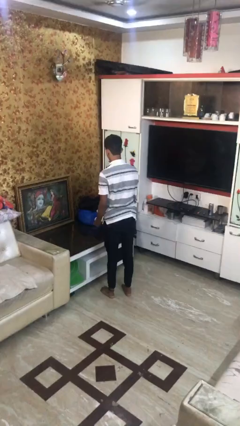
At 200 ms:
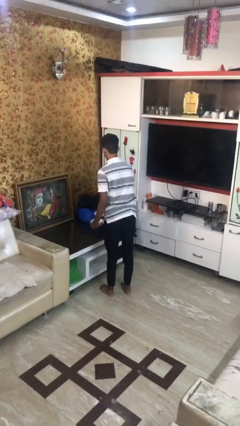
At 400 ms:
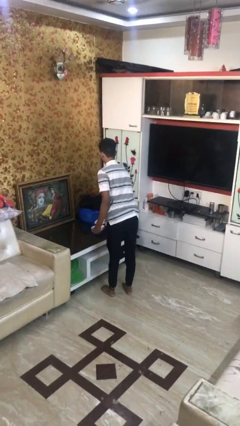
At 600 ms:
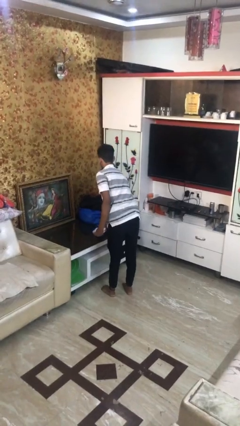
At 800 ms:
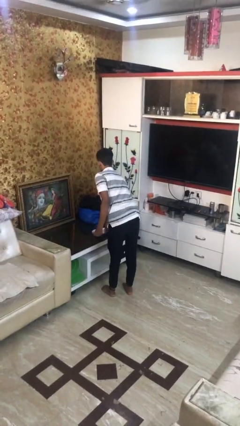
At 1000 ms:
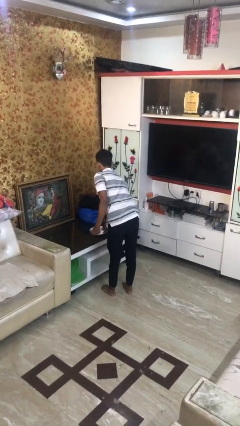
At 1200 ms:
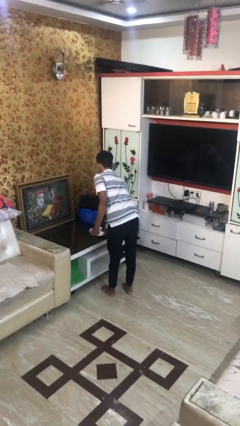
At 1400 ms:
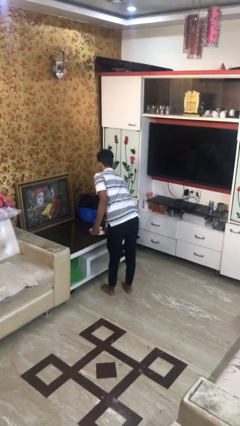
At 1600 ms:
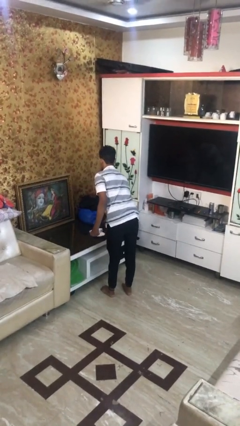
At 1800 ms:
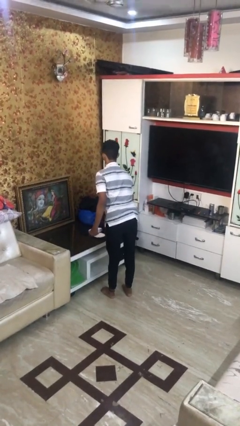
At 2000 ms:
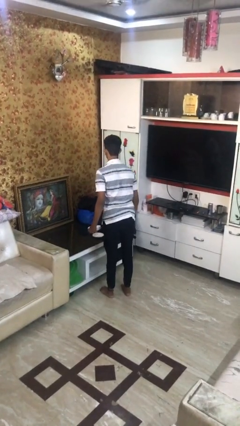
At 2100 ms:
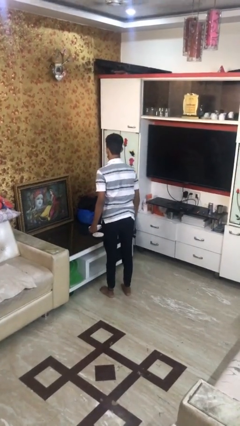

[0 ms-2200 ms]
person sets table

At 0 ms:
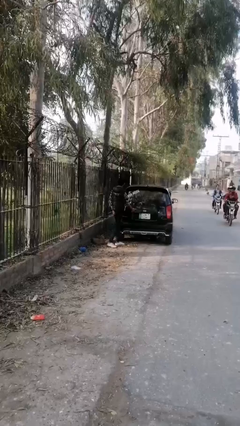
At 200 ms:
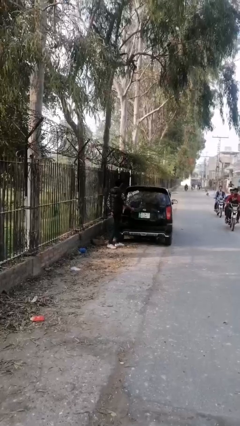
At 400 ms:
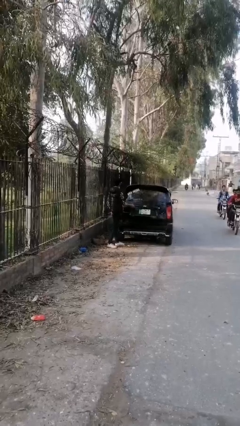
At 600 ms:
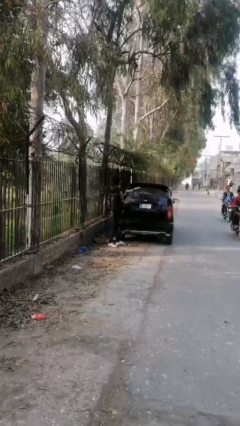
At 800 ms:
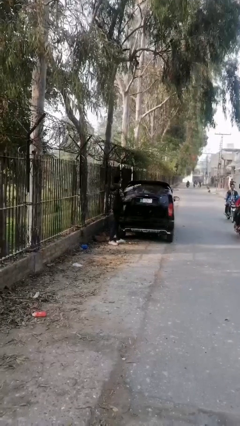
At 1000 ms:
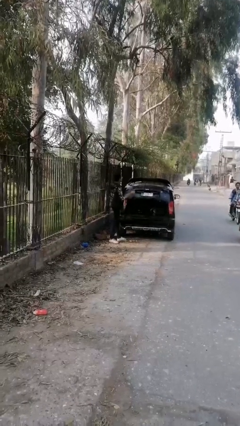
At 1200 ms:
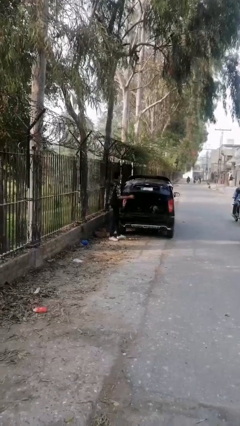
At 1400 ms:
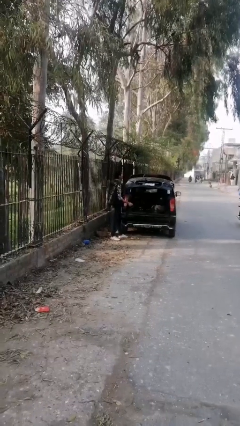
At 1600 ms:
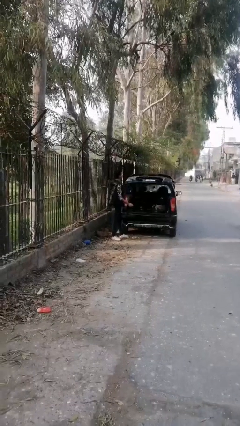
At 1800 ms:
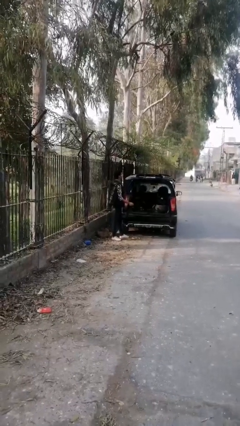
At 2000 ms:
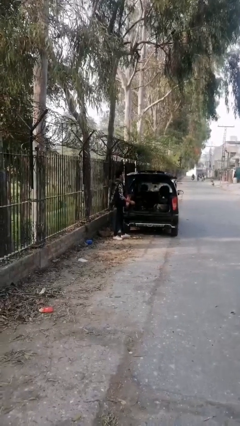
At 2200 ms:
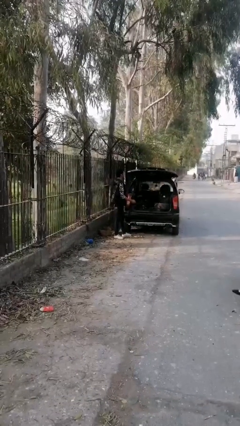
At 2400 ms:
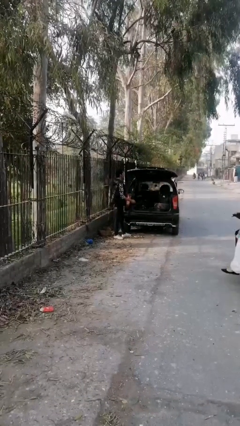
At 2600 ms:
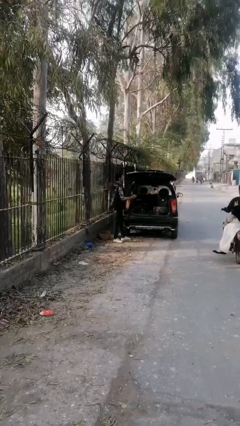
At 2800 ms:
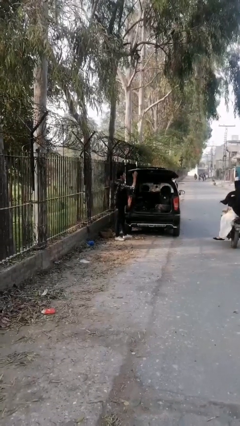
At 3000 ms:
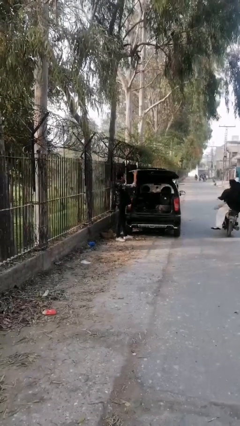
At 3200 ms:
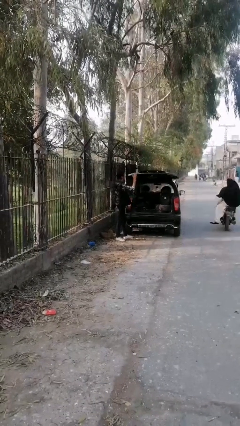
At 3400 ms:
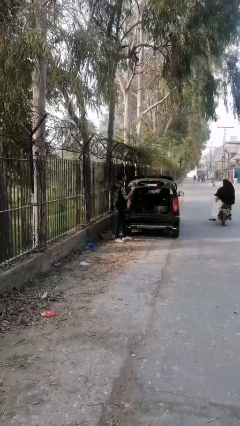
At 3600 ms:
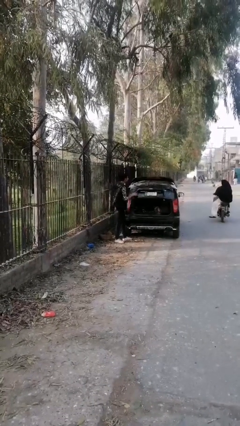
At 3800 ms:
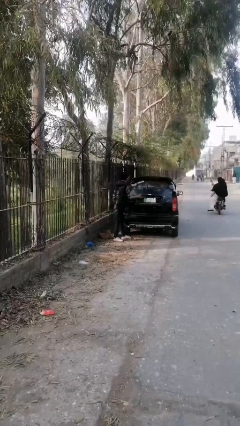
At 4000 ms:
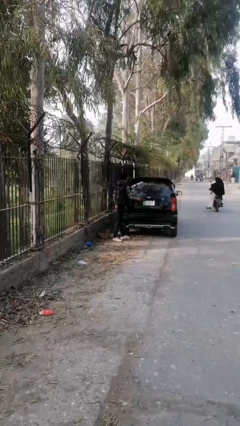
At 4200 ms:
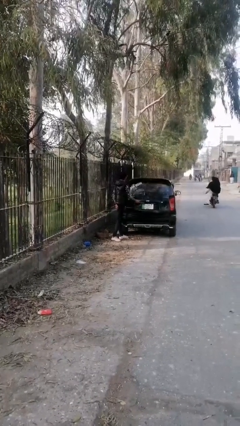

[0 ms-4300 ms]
person opens car trunk

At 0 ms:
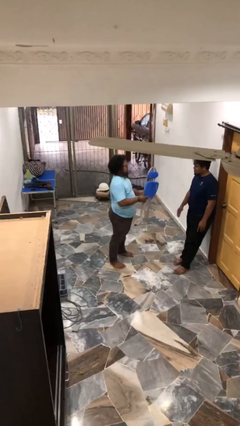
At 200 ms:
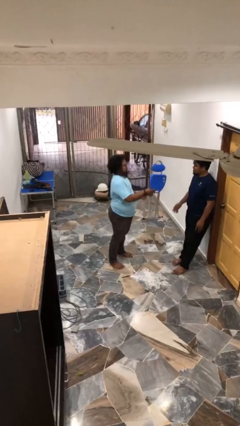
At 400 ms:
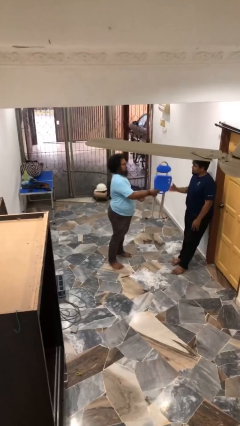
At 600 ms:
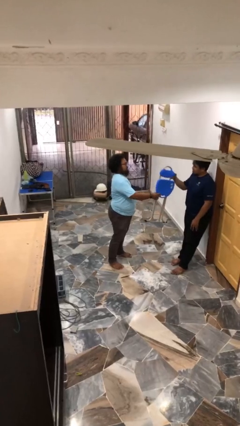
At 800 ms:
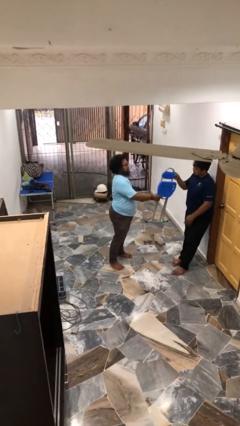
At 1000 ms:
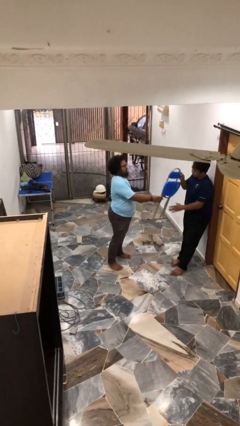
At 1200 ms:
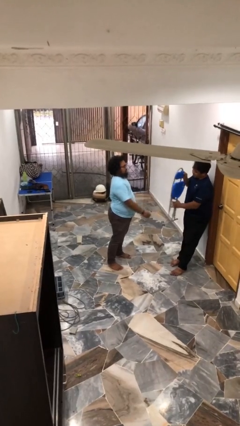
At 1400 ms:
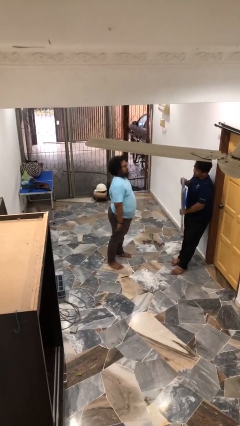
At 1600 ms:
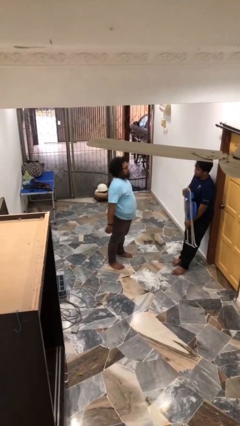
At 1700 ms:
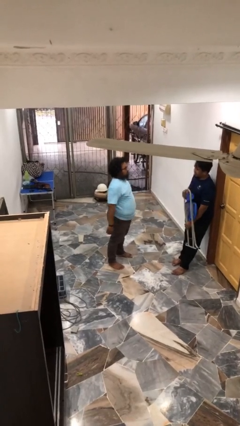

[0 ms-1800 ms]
person transfers object to person

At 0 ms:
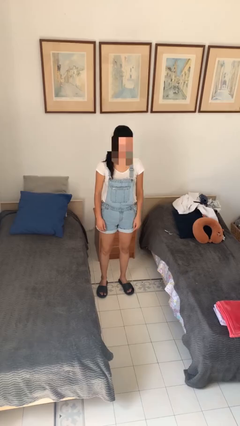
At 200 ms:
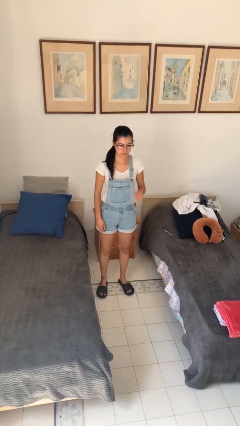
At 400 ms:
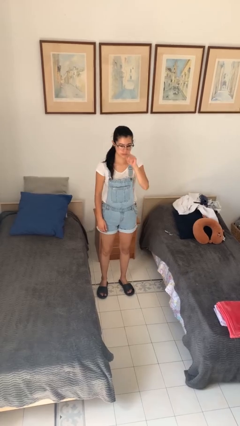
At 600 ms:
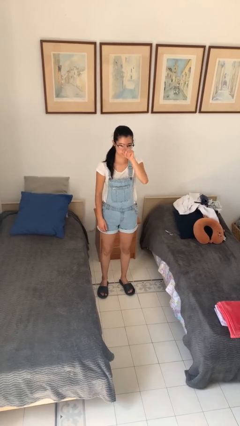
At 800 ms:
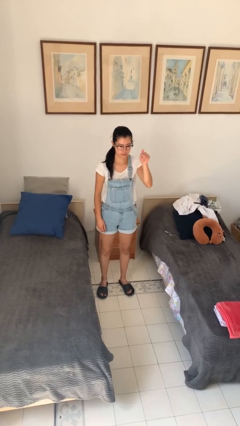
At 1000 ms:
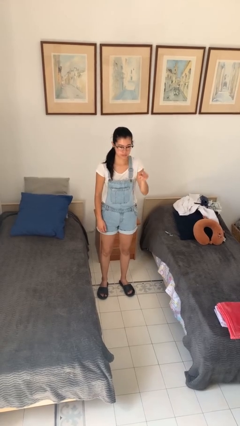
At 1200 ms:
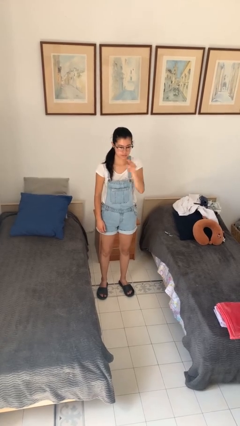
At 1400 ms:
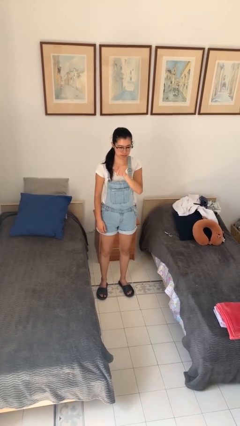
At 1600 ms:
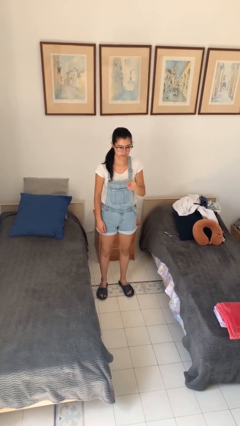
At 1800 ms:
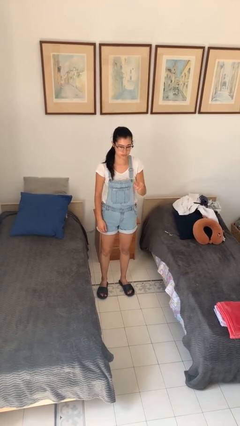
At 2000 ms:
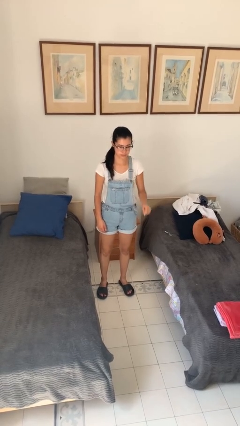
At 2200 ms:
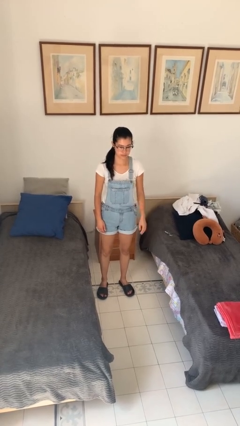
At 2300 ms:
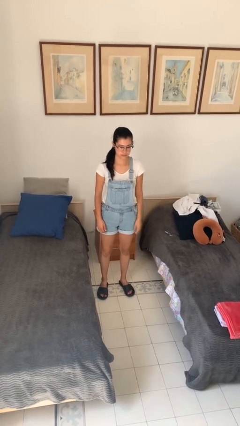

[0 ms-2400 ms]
person gestures number five

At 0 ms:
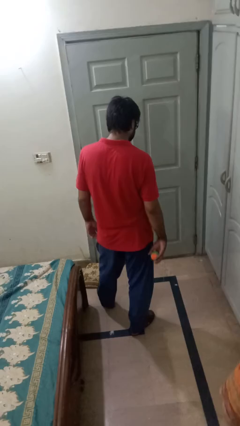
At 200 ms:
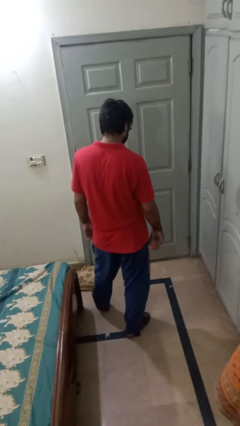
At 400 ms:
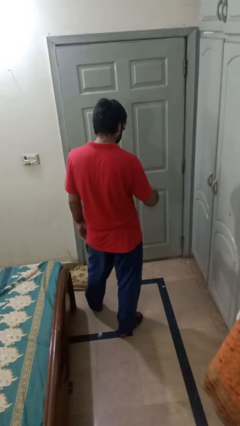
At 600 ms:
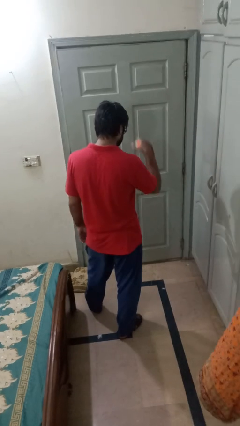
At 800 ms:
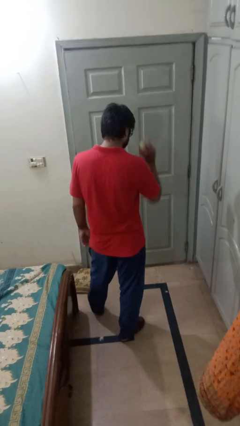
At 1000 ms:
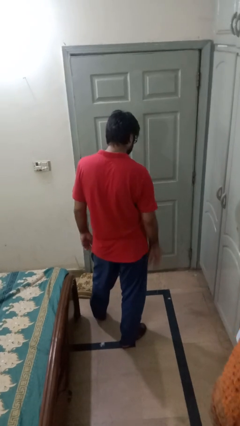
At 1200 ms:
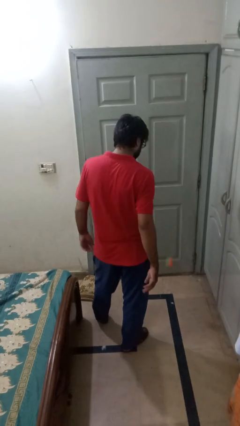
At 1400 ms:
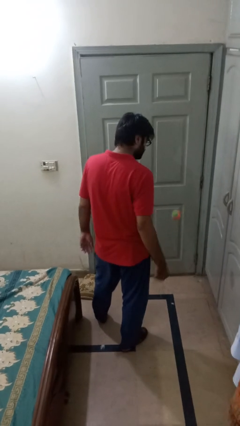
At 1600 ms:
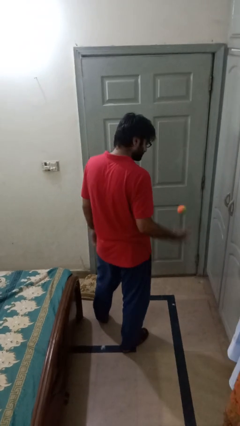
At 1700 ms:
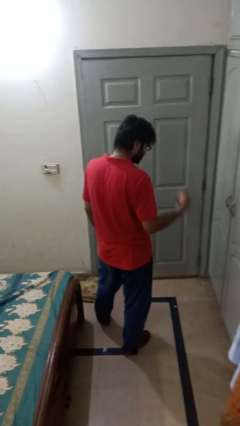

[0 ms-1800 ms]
person bounces ball on floor

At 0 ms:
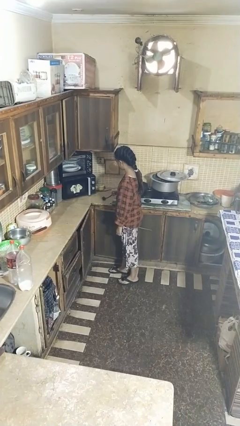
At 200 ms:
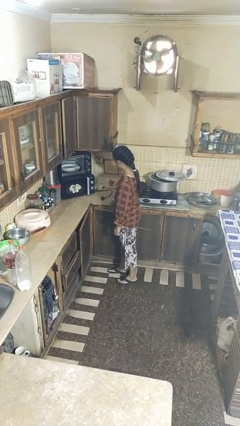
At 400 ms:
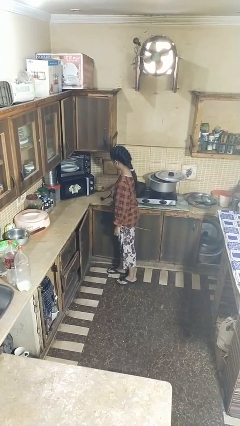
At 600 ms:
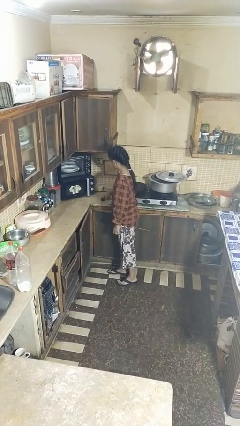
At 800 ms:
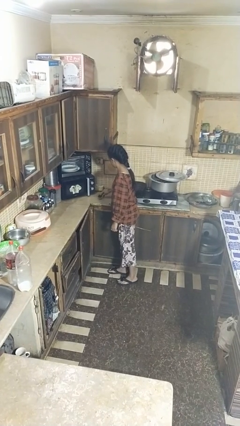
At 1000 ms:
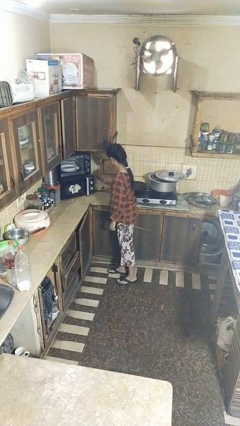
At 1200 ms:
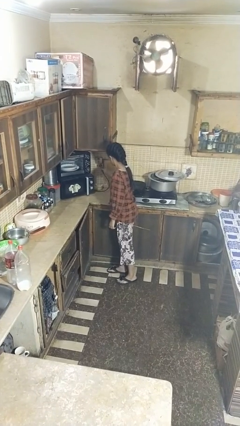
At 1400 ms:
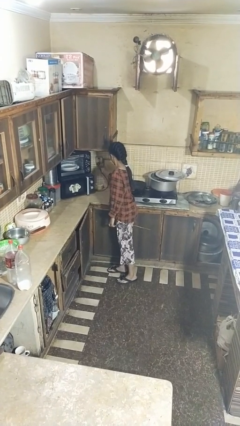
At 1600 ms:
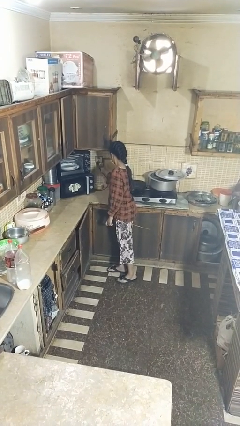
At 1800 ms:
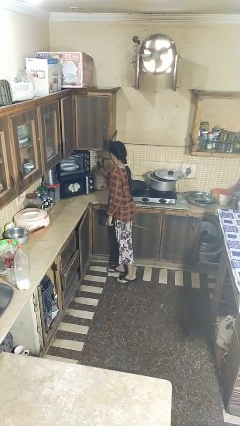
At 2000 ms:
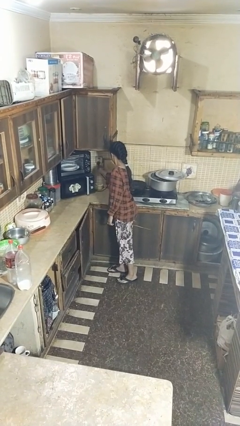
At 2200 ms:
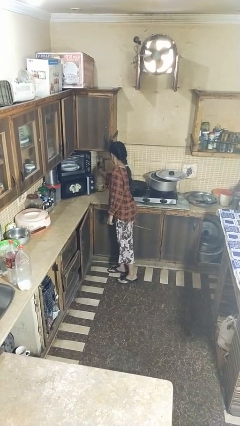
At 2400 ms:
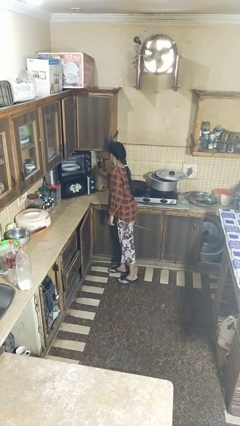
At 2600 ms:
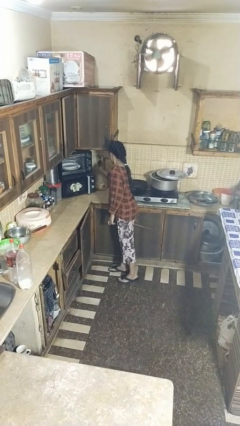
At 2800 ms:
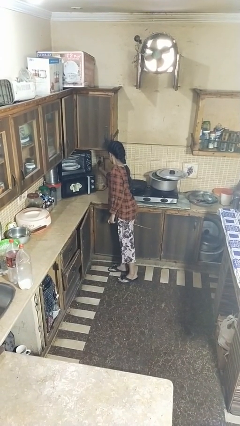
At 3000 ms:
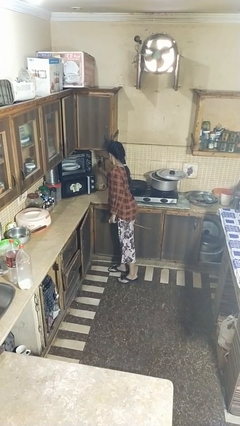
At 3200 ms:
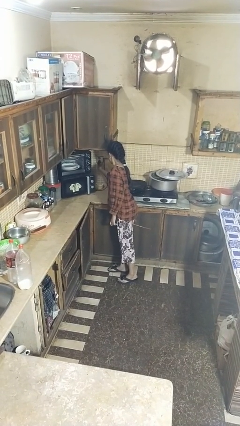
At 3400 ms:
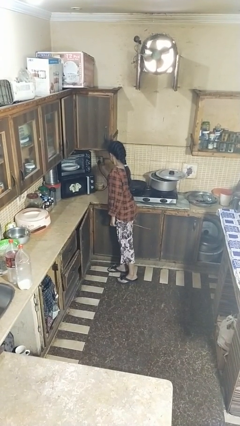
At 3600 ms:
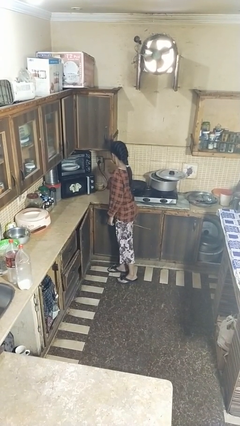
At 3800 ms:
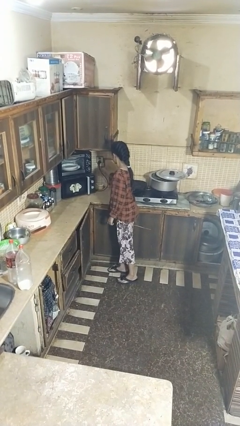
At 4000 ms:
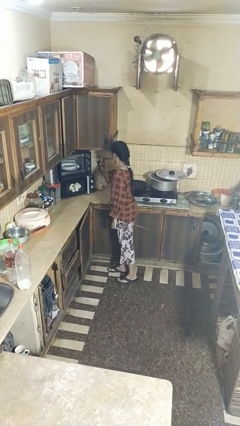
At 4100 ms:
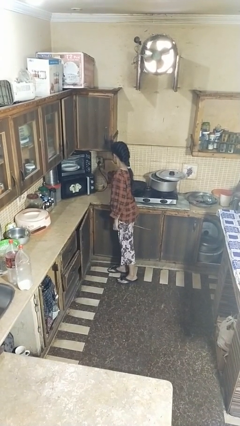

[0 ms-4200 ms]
person plugs into electrical socket

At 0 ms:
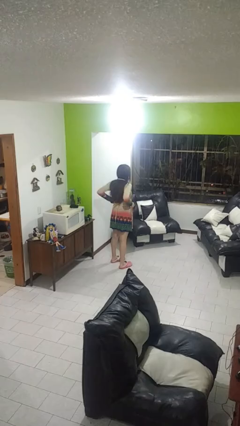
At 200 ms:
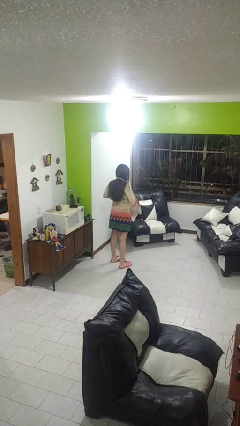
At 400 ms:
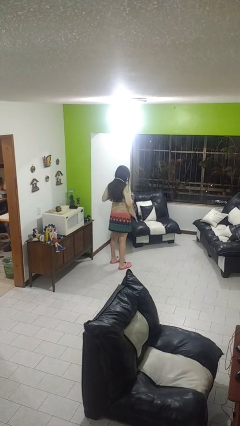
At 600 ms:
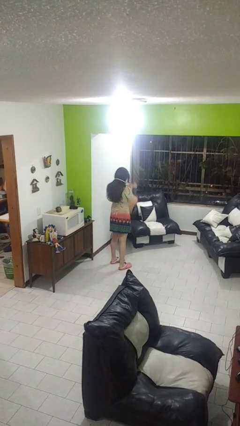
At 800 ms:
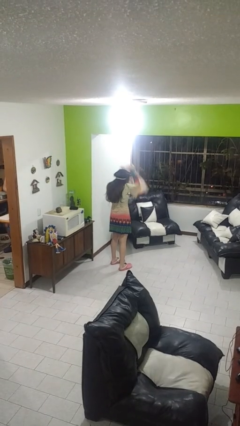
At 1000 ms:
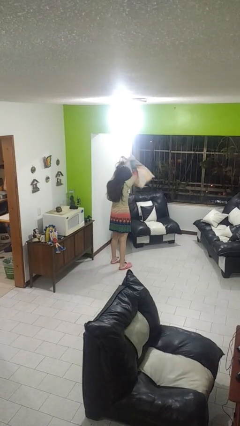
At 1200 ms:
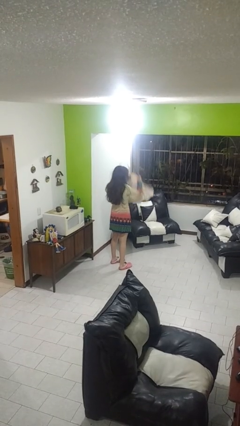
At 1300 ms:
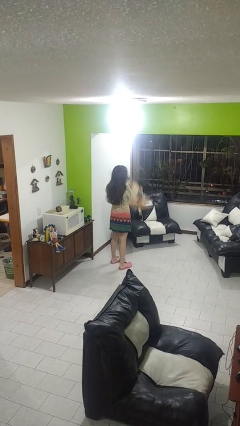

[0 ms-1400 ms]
person takes off apron
